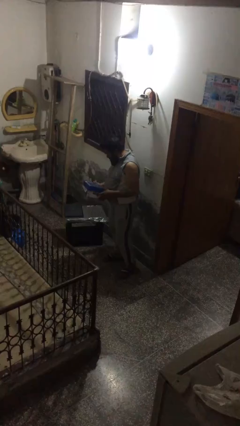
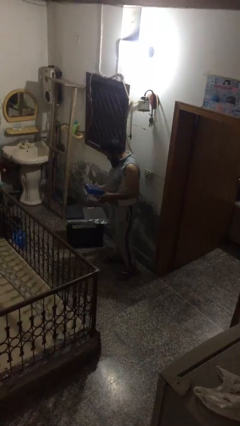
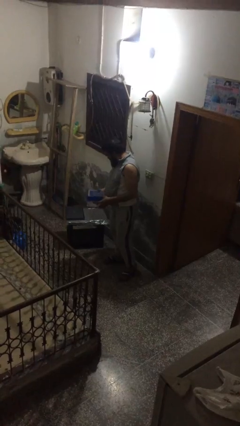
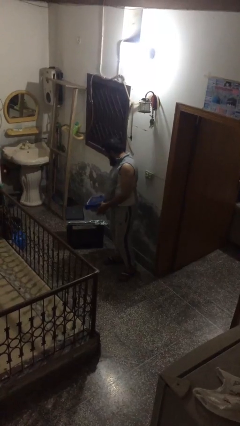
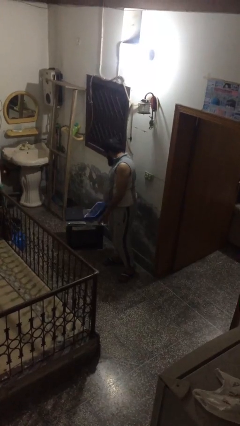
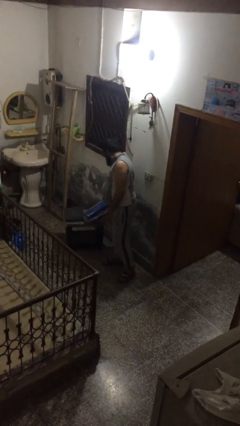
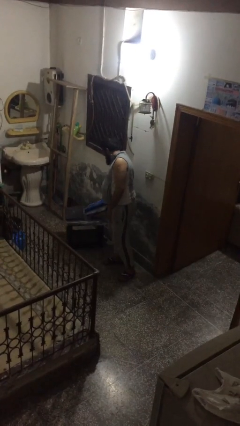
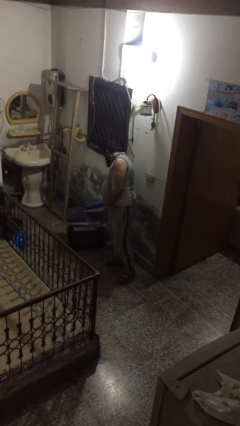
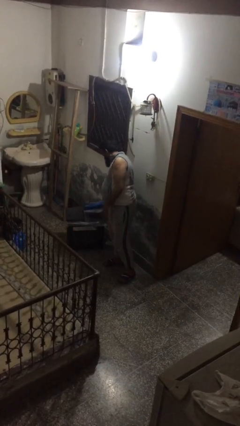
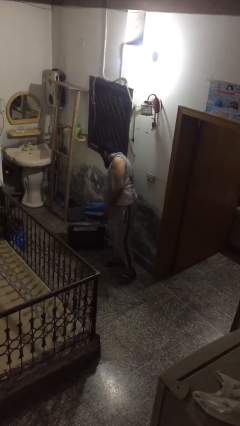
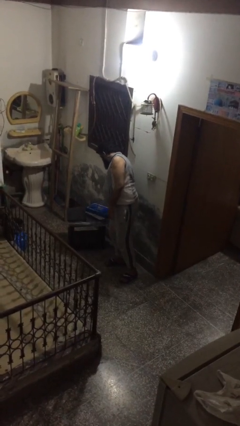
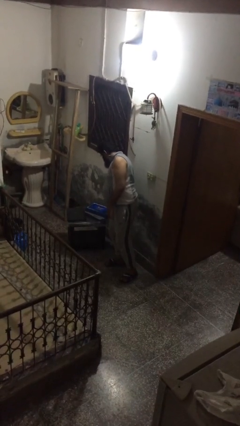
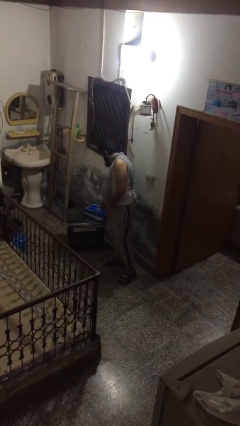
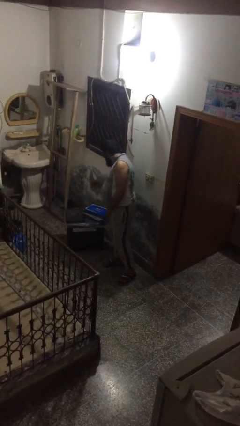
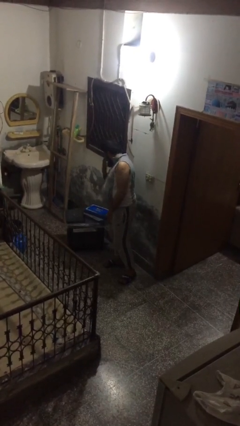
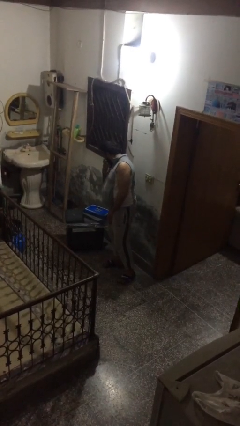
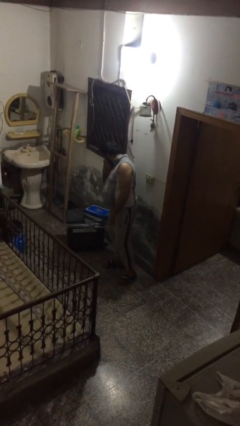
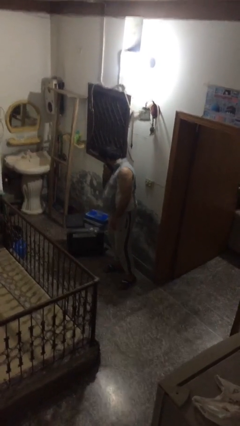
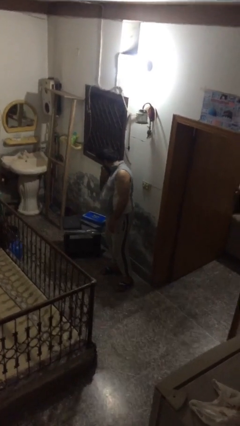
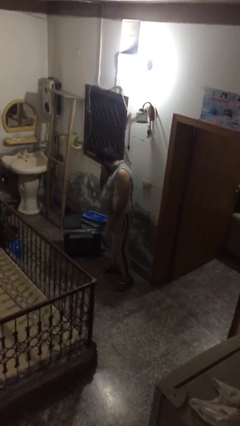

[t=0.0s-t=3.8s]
person puts down object on table

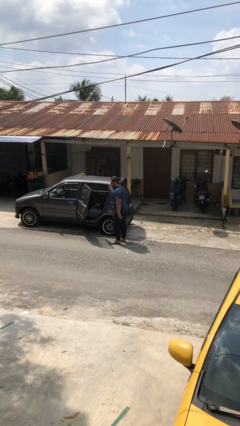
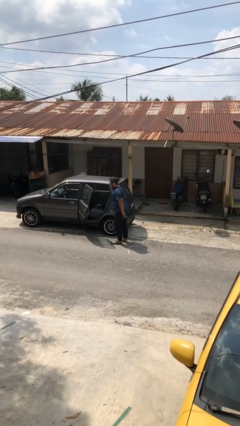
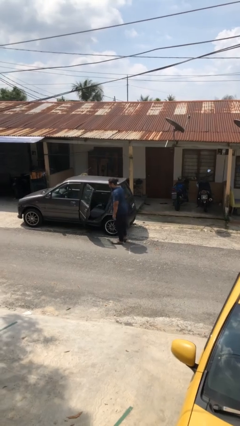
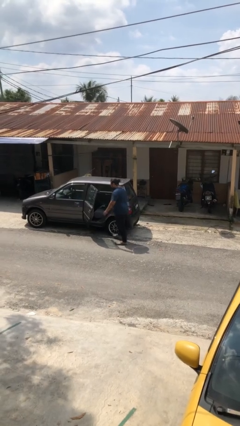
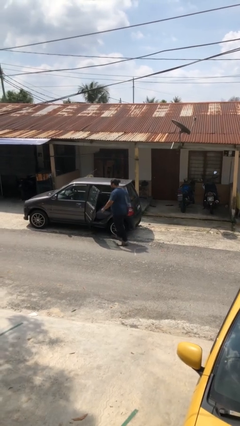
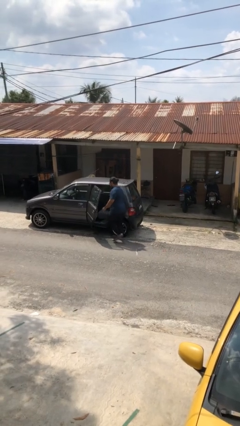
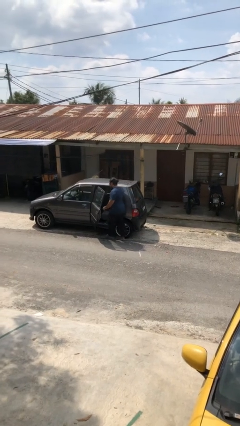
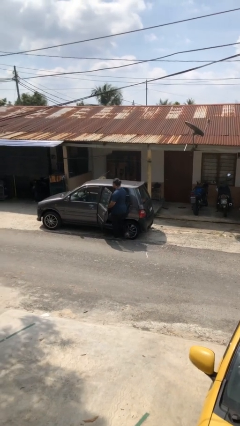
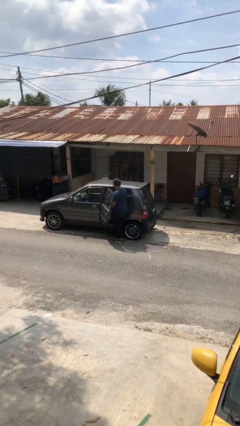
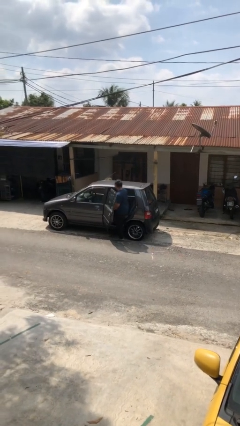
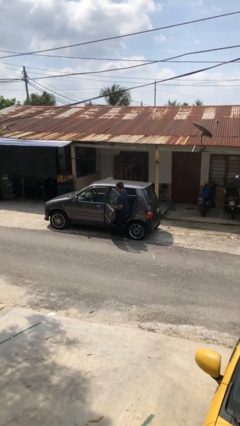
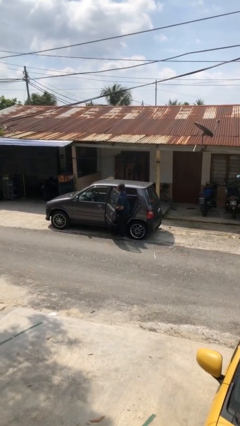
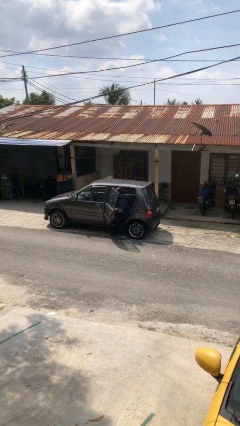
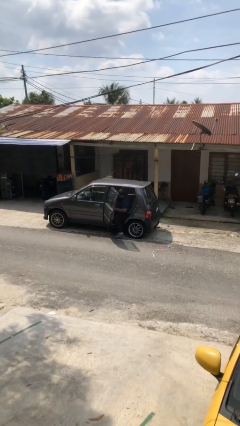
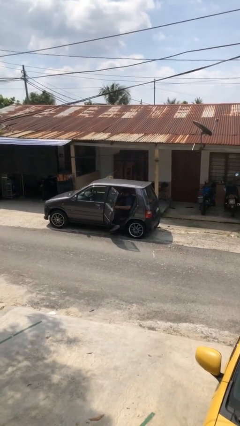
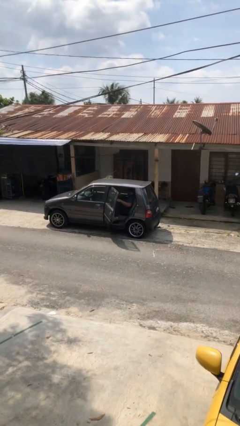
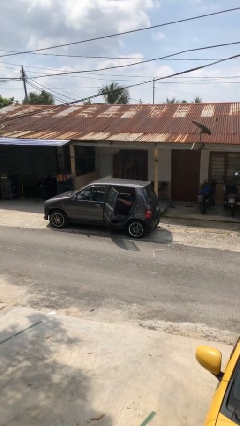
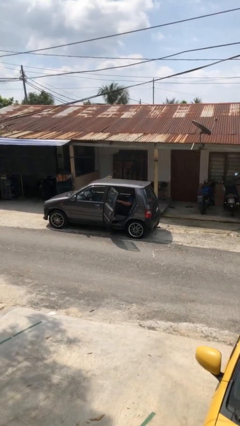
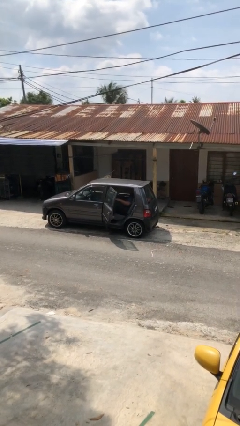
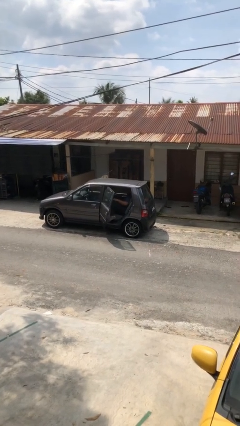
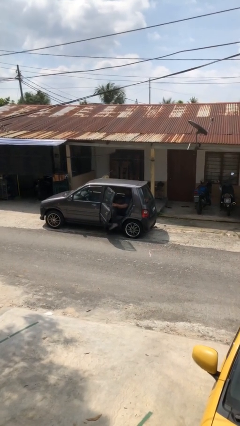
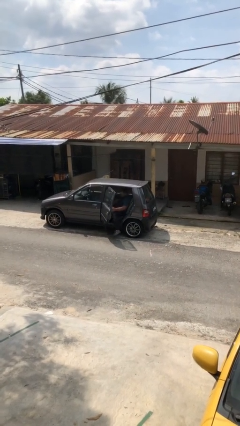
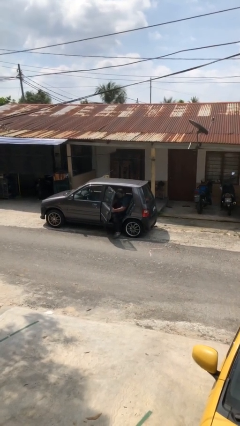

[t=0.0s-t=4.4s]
person enters car

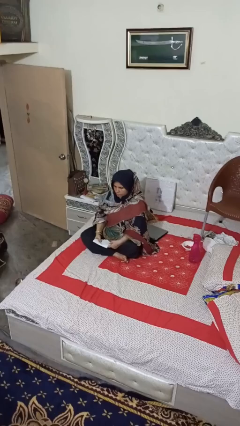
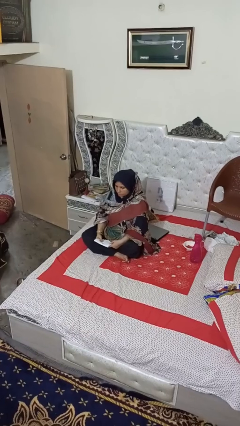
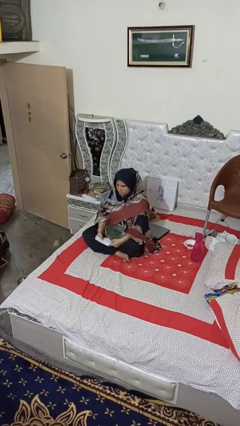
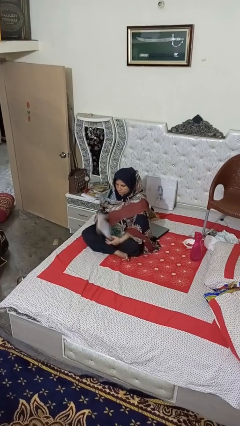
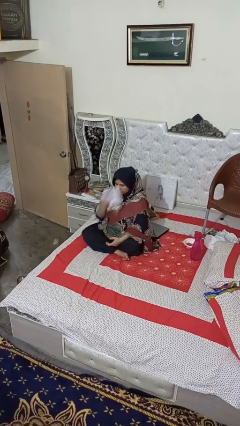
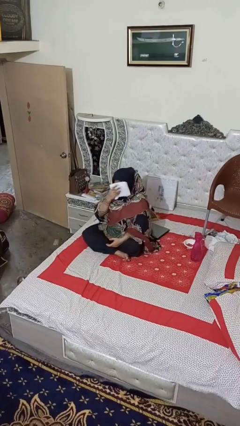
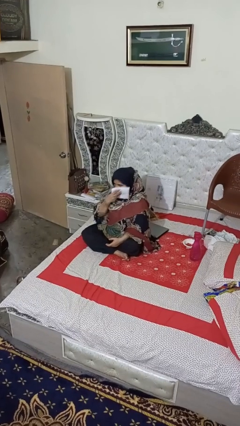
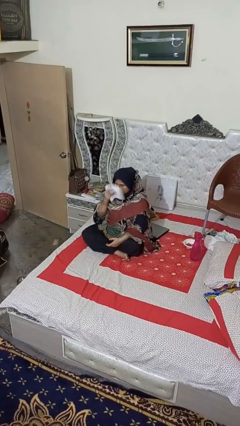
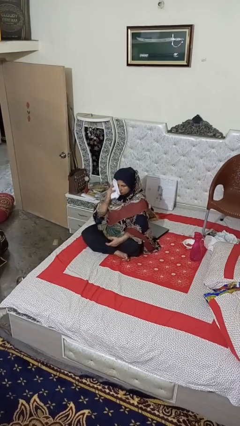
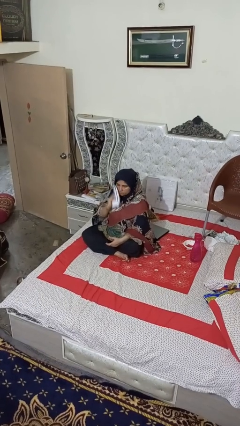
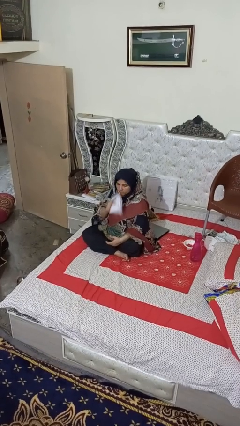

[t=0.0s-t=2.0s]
person wipes mouth with napkin

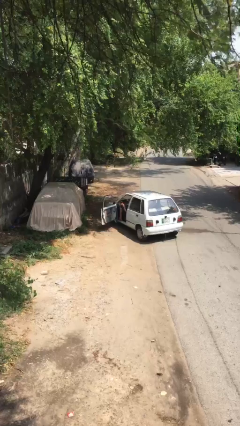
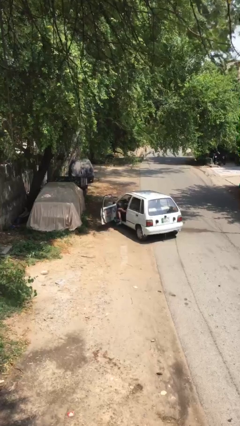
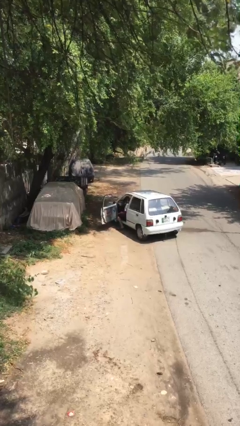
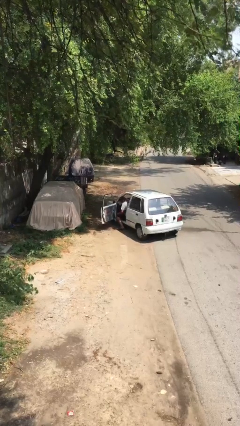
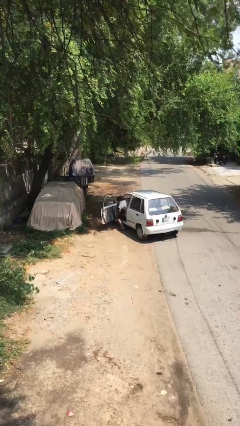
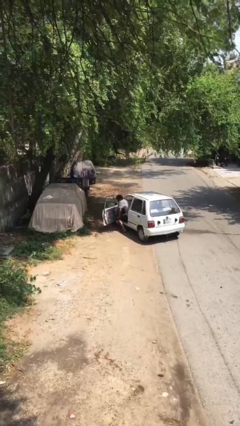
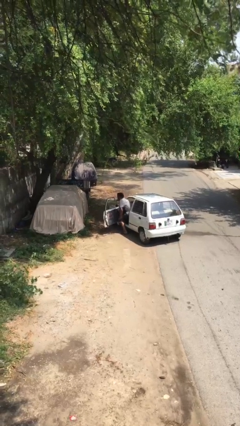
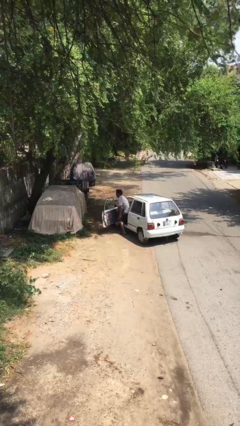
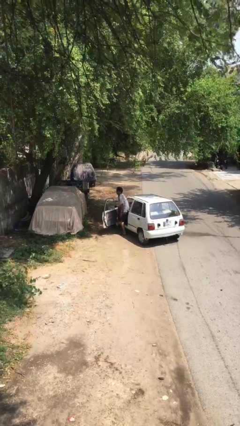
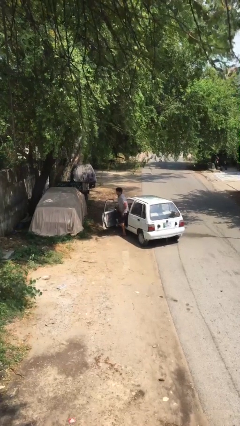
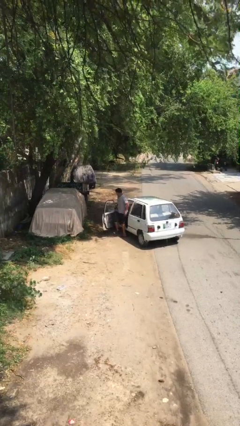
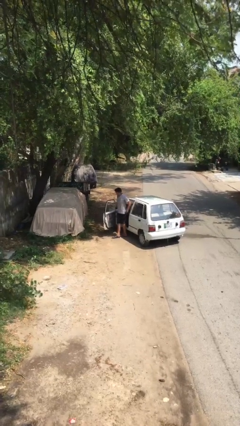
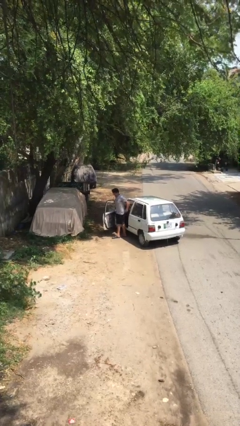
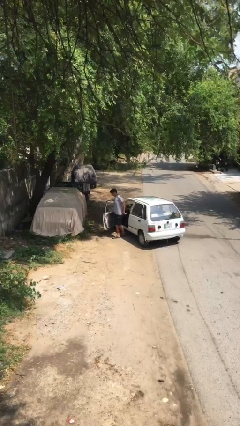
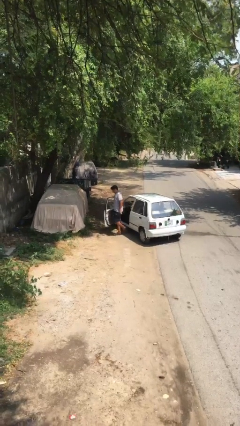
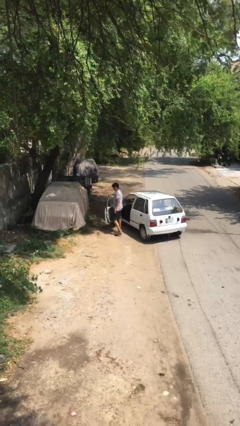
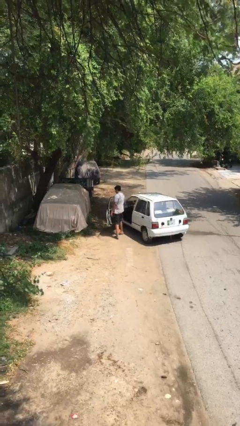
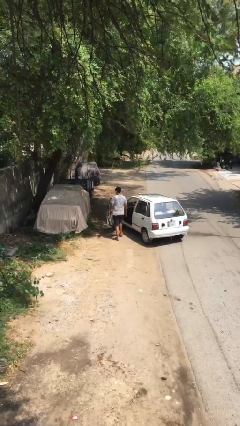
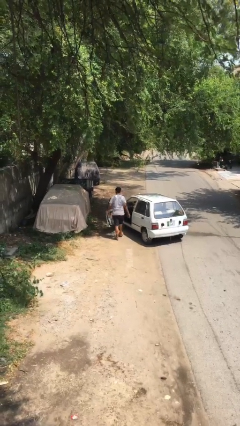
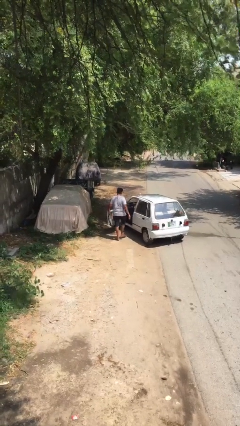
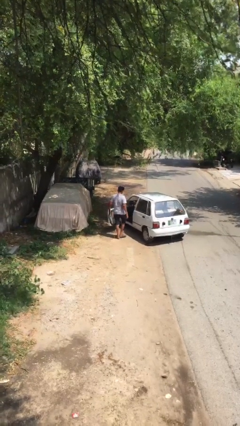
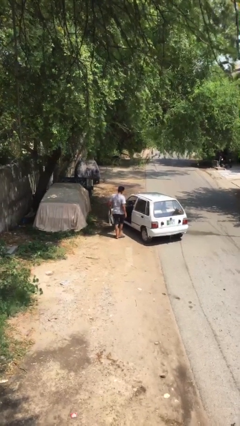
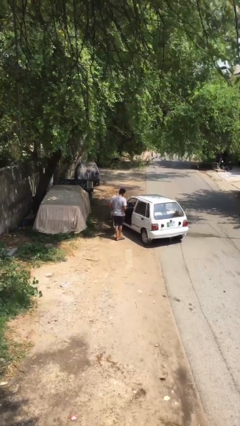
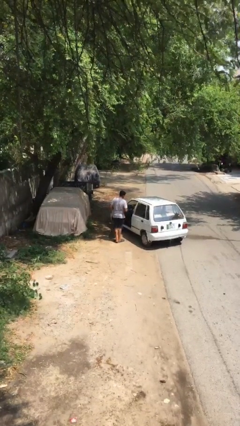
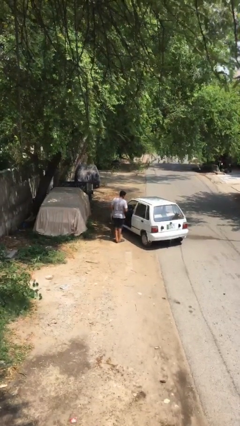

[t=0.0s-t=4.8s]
person exits car

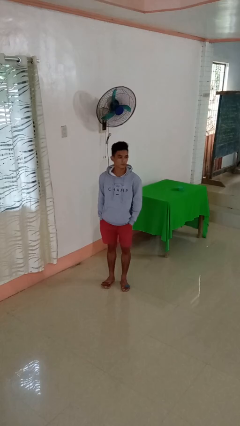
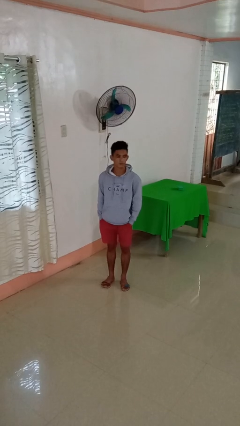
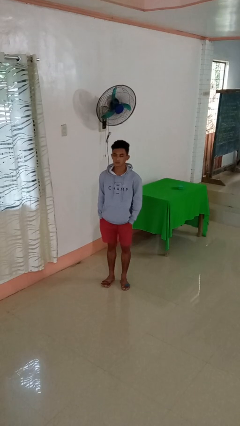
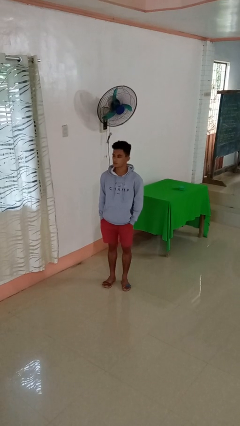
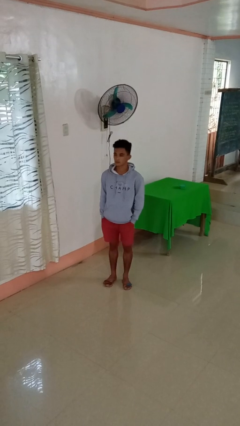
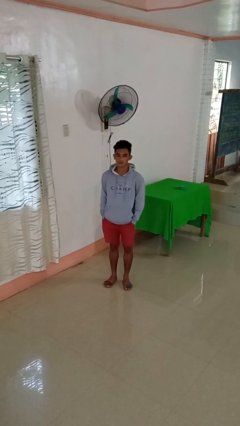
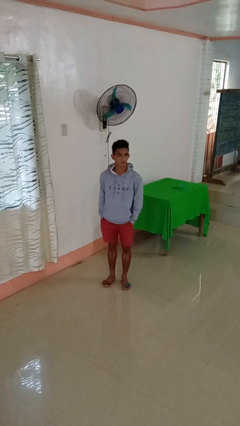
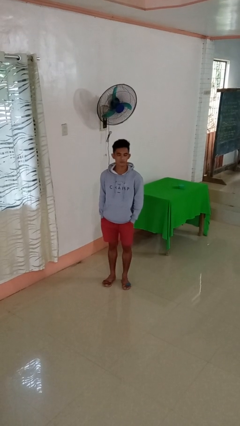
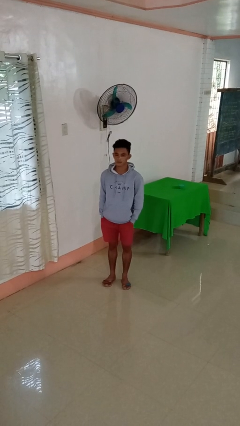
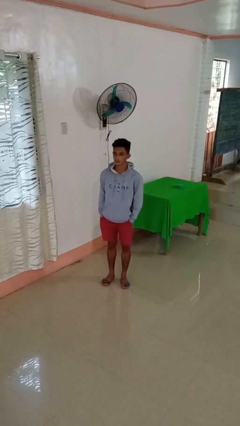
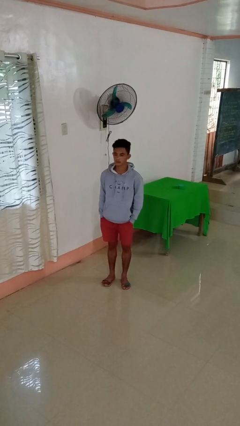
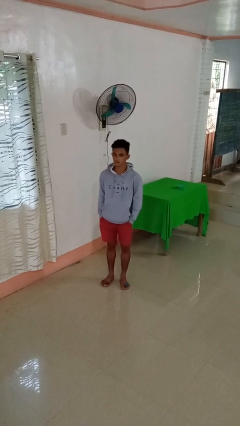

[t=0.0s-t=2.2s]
person shakes head

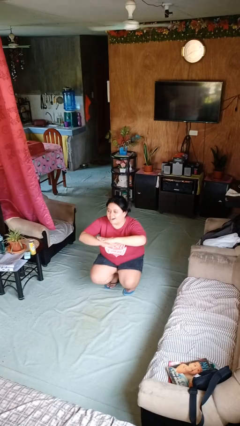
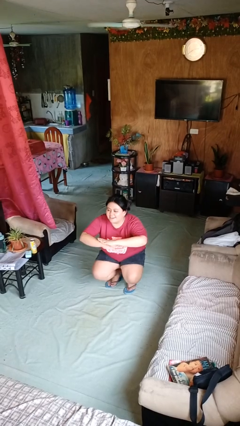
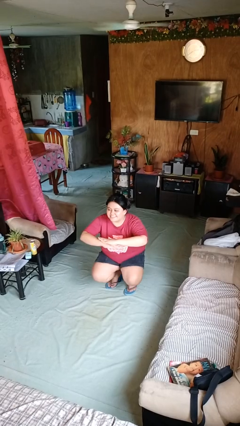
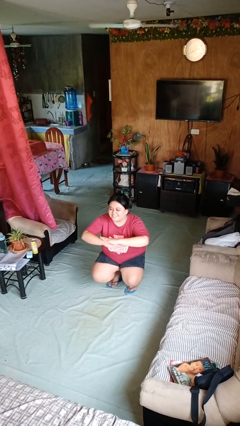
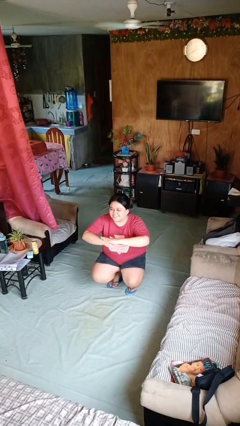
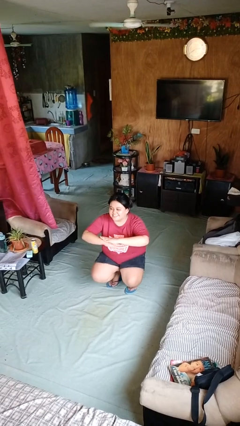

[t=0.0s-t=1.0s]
person squats
